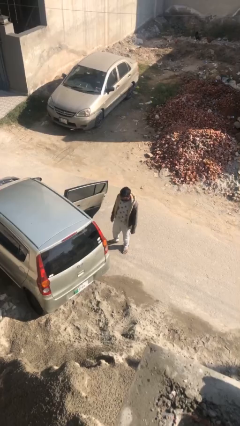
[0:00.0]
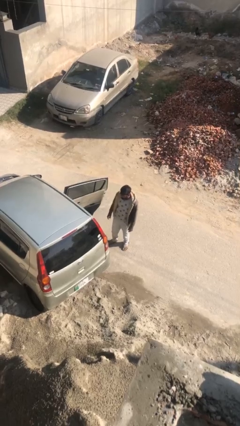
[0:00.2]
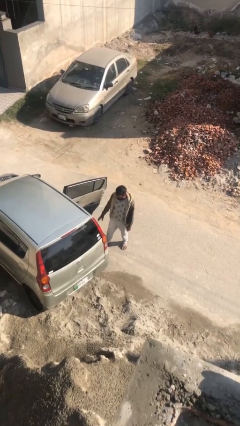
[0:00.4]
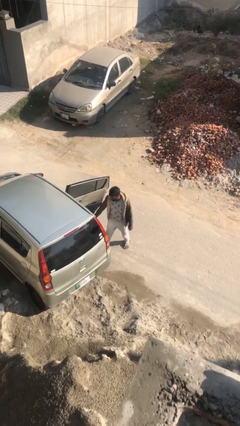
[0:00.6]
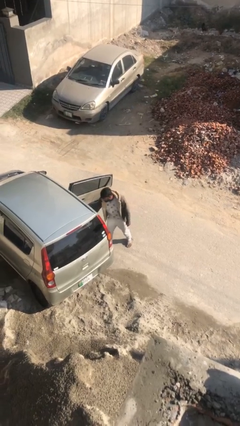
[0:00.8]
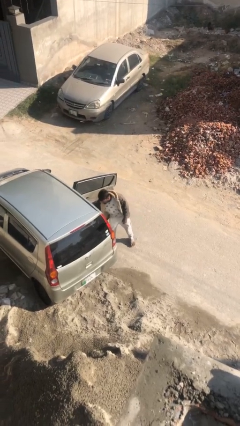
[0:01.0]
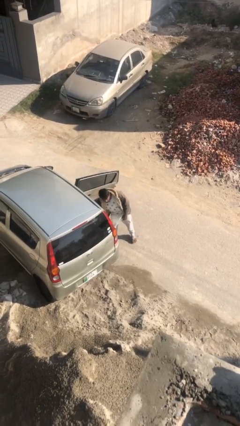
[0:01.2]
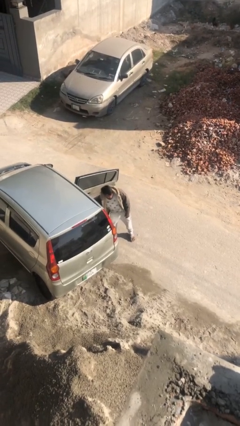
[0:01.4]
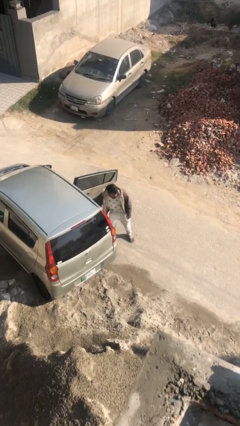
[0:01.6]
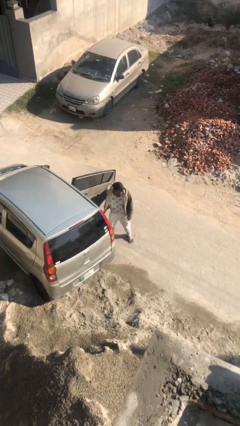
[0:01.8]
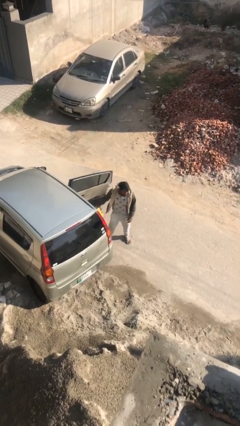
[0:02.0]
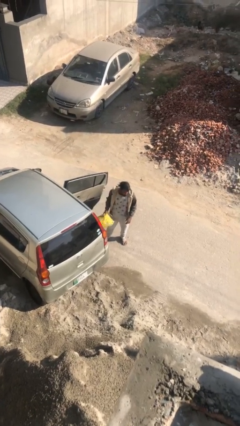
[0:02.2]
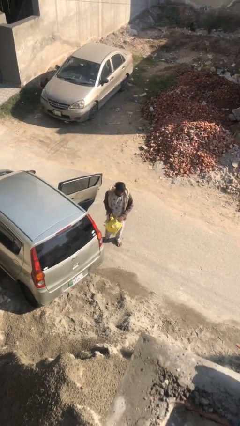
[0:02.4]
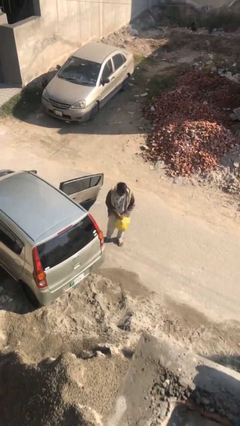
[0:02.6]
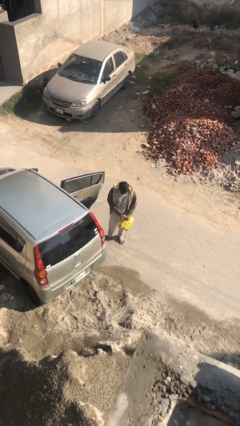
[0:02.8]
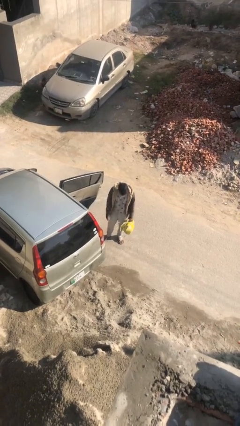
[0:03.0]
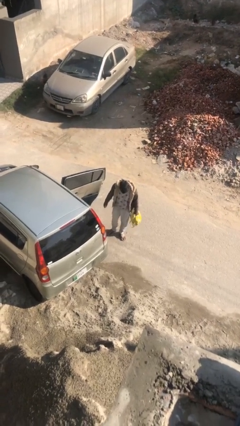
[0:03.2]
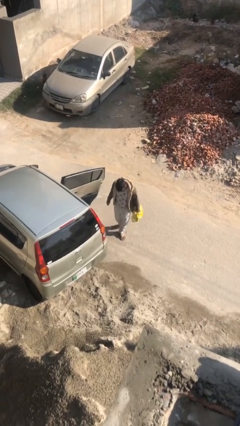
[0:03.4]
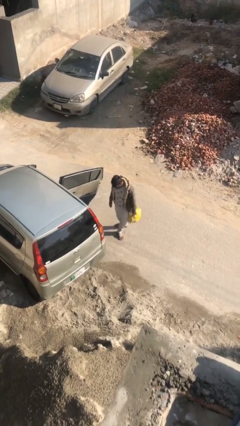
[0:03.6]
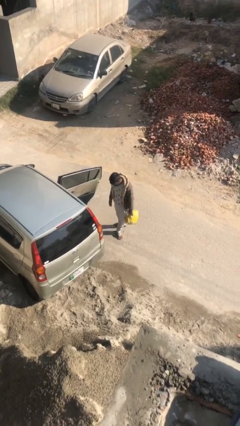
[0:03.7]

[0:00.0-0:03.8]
person unloads car

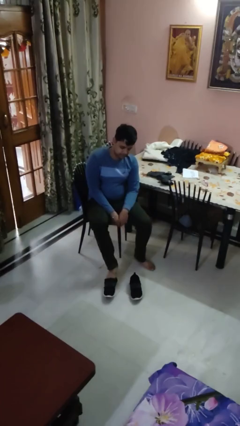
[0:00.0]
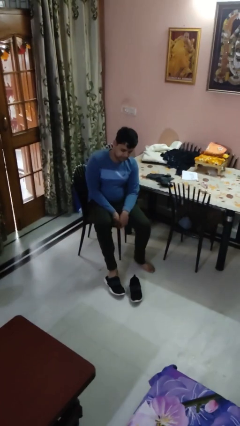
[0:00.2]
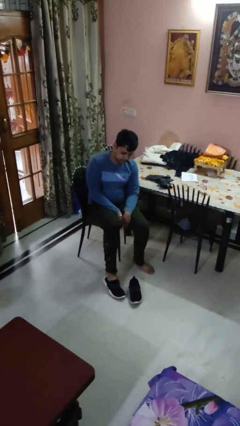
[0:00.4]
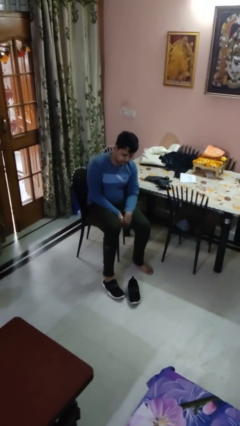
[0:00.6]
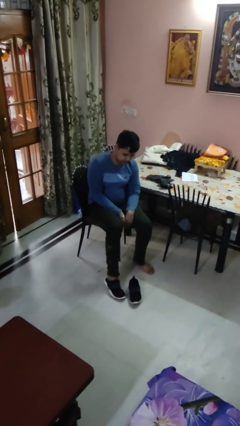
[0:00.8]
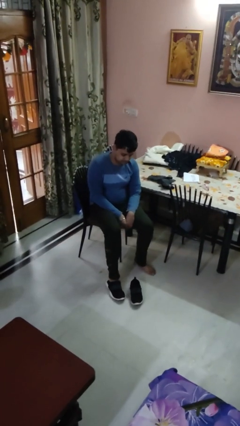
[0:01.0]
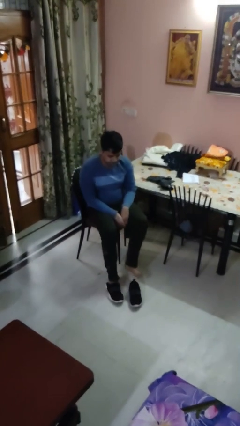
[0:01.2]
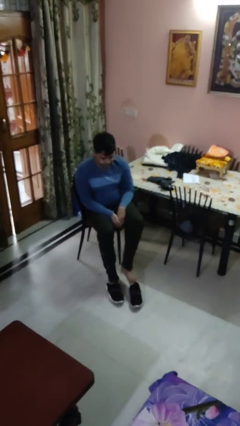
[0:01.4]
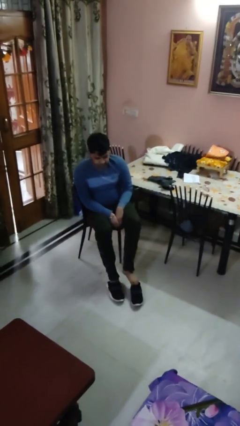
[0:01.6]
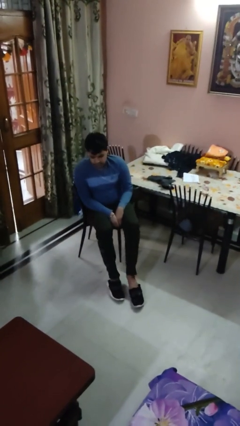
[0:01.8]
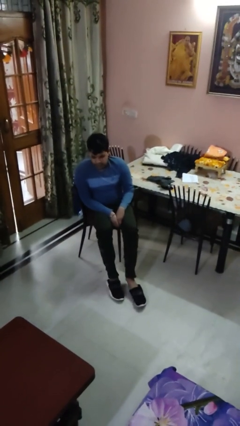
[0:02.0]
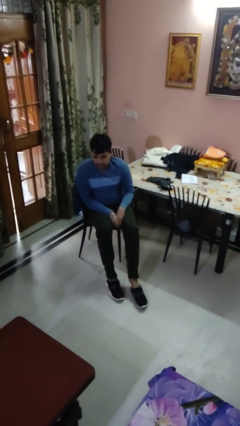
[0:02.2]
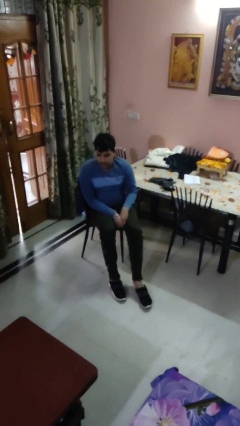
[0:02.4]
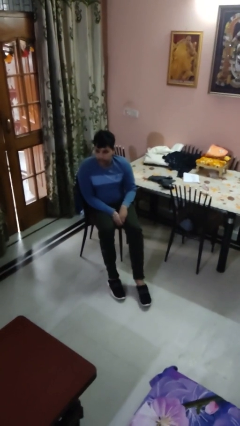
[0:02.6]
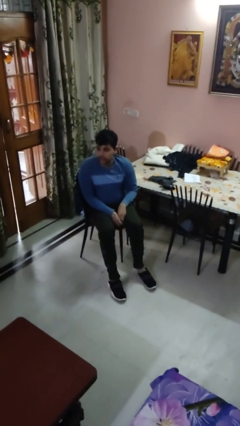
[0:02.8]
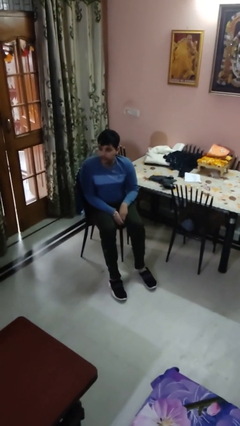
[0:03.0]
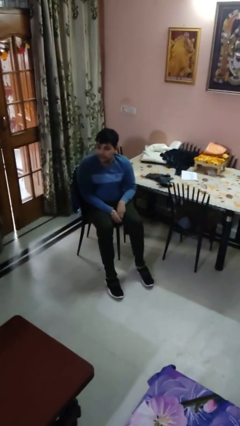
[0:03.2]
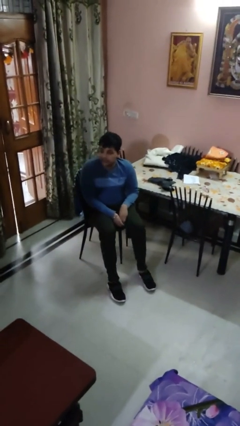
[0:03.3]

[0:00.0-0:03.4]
person puts on shoes

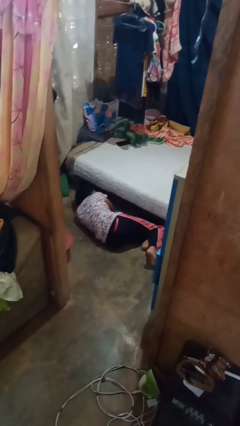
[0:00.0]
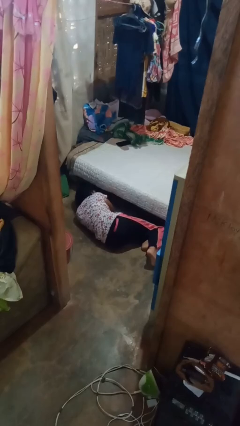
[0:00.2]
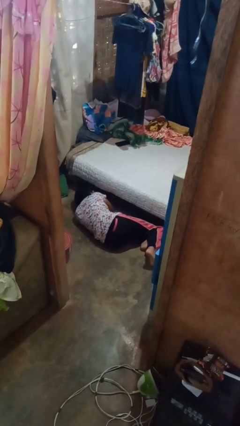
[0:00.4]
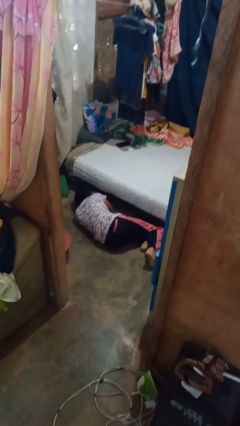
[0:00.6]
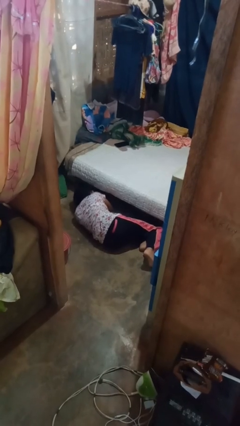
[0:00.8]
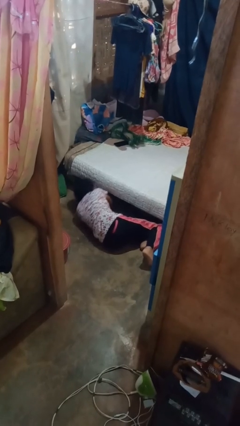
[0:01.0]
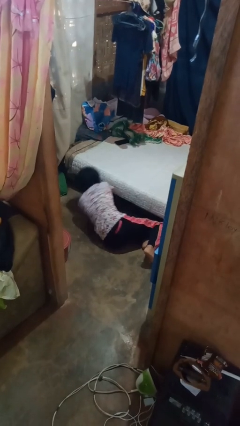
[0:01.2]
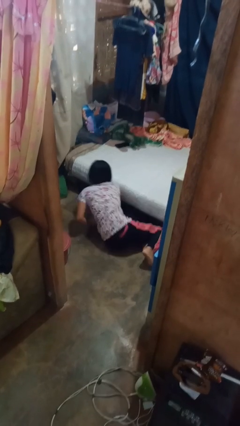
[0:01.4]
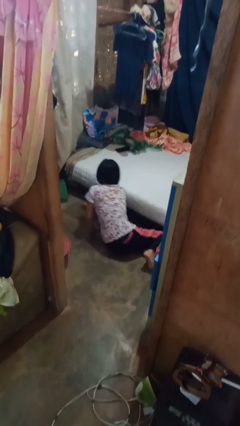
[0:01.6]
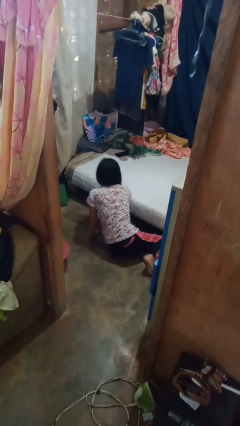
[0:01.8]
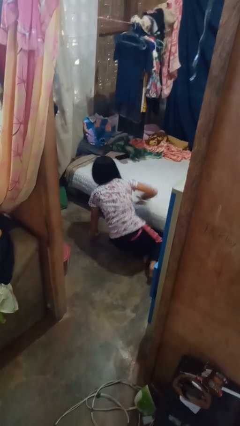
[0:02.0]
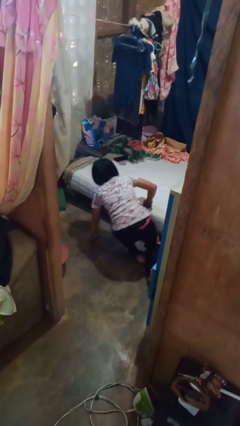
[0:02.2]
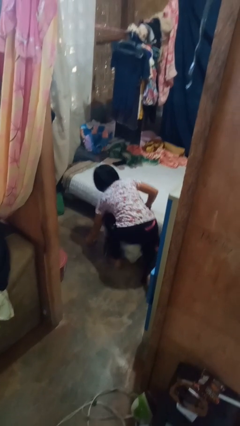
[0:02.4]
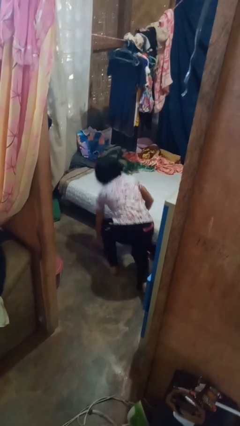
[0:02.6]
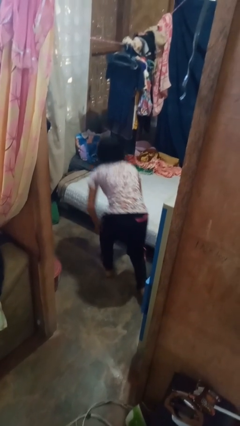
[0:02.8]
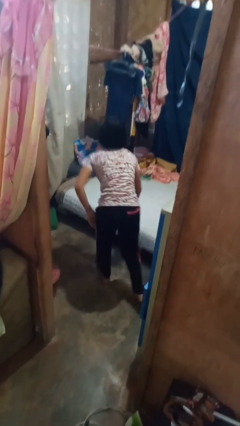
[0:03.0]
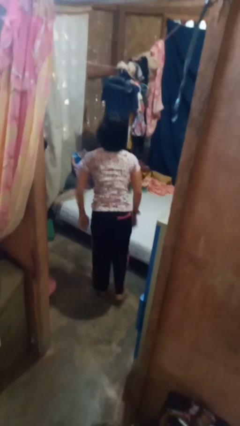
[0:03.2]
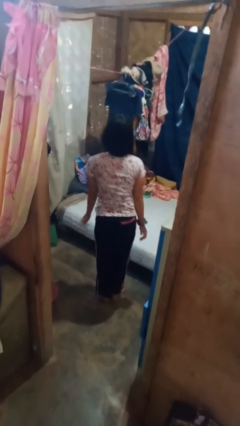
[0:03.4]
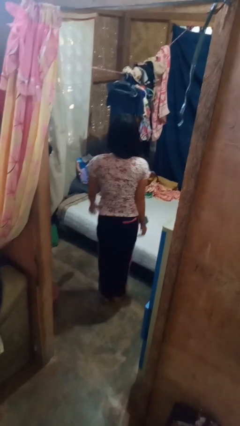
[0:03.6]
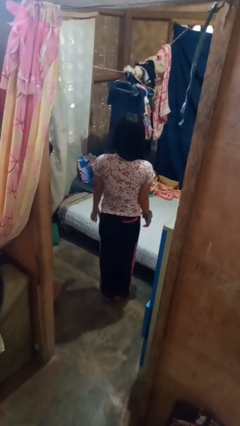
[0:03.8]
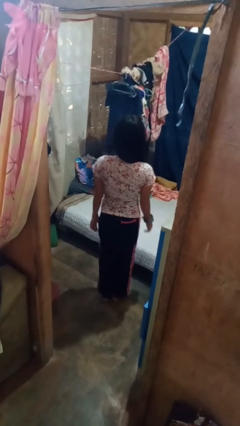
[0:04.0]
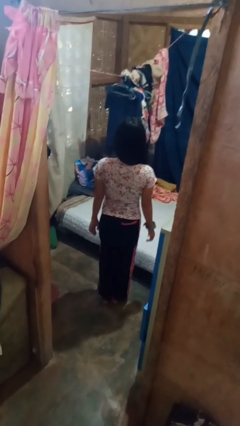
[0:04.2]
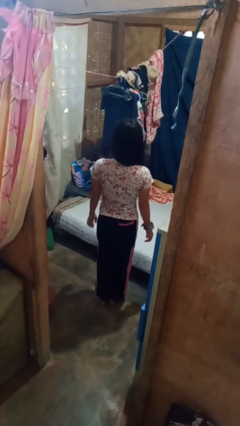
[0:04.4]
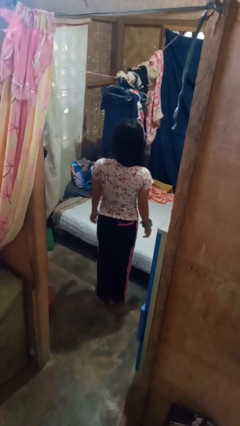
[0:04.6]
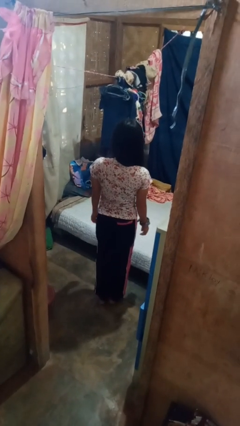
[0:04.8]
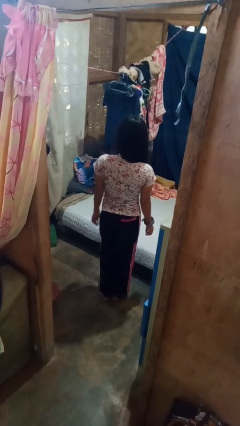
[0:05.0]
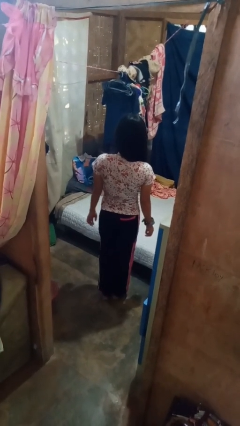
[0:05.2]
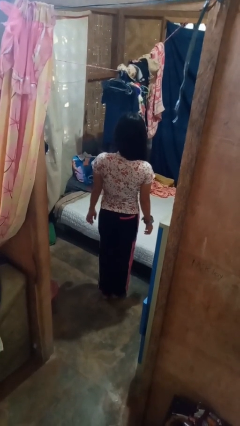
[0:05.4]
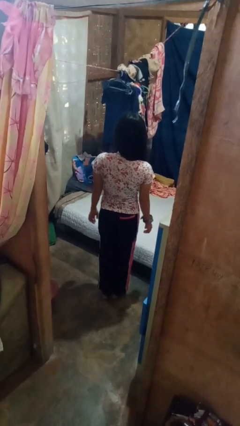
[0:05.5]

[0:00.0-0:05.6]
person stands up from floor

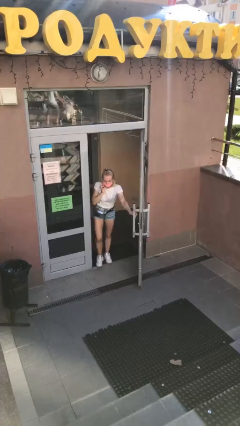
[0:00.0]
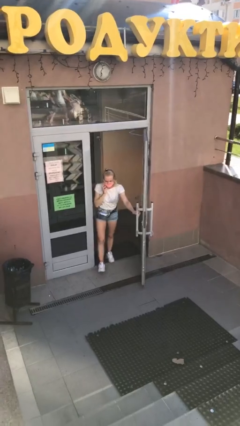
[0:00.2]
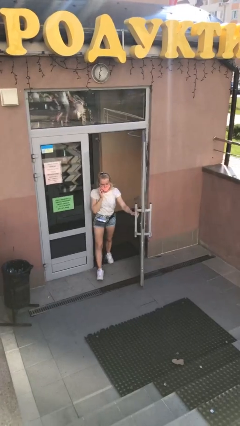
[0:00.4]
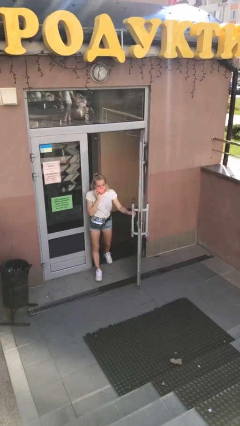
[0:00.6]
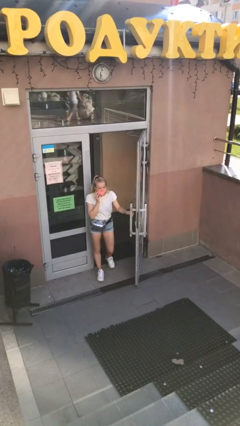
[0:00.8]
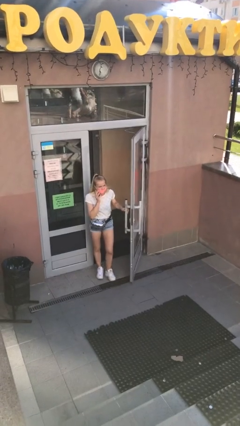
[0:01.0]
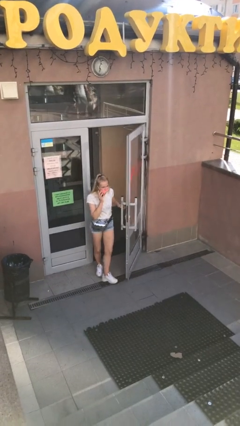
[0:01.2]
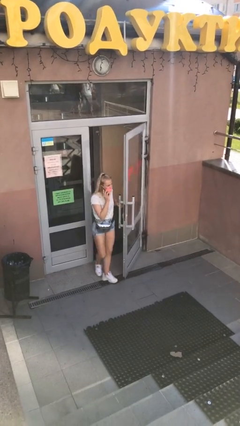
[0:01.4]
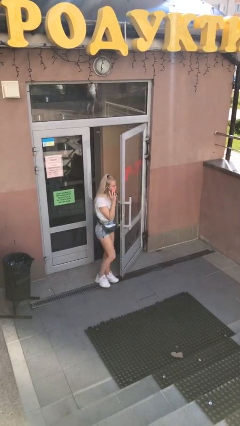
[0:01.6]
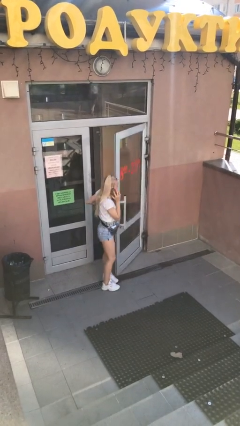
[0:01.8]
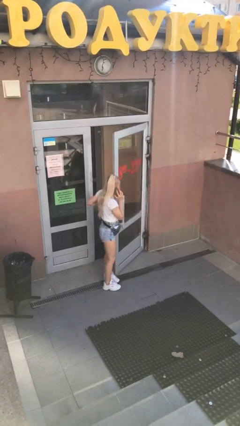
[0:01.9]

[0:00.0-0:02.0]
person enters scene through structure

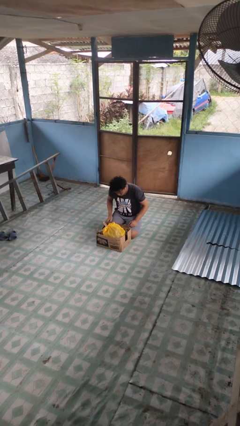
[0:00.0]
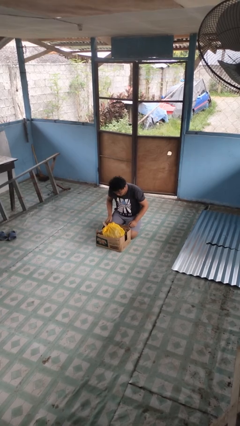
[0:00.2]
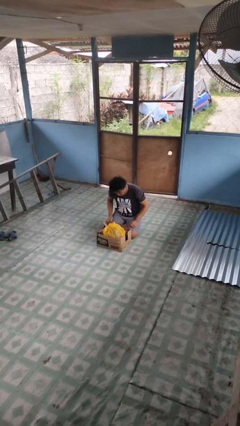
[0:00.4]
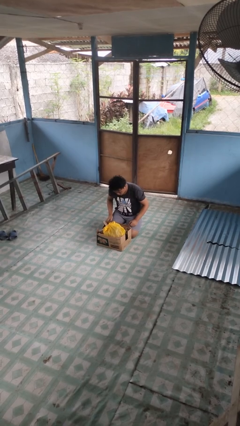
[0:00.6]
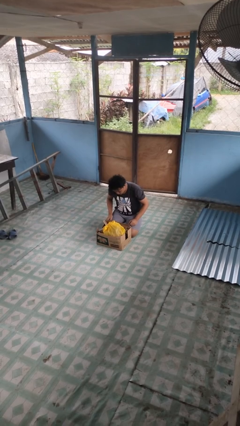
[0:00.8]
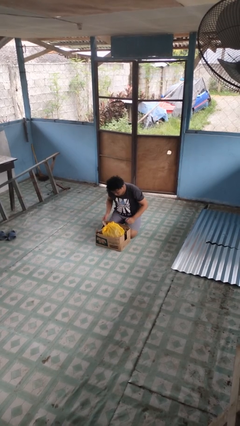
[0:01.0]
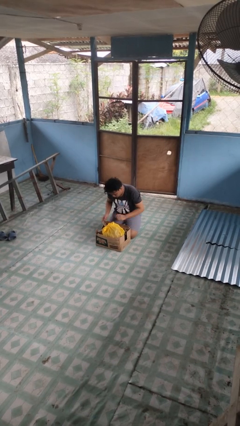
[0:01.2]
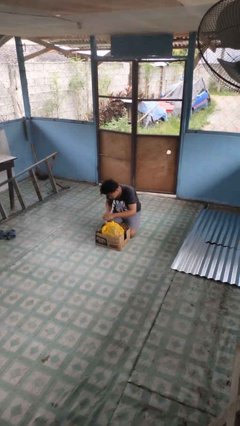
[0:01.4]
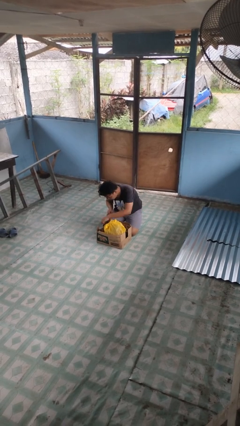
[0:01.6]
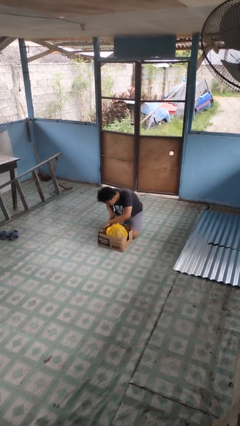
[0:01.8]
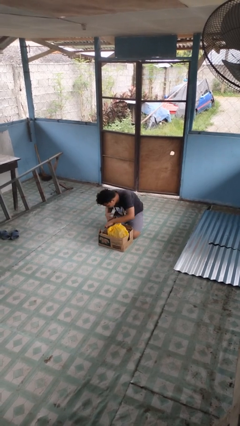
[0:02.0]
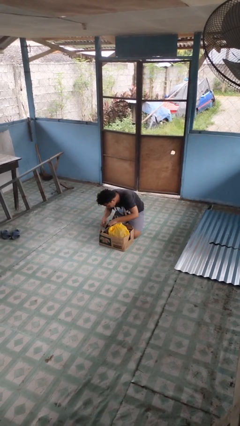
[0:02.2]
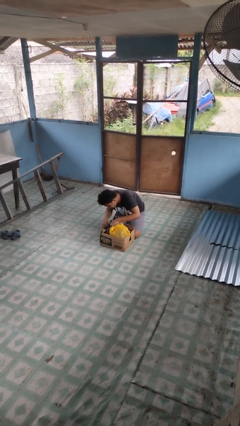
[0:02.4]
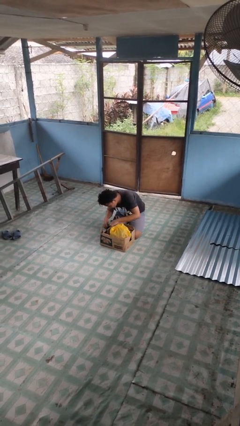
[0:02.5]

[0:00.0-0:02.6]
person searches in box

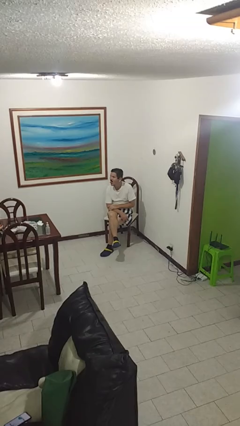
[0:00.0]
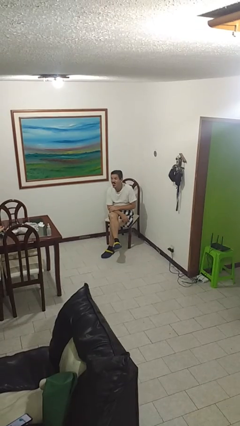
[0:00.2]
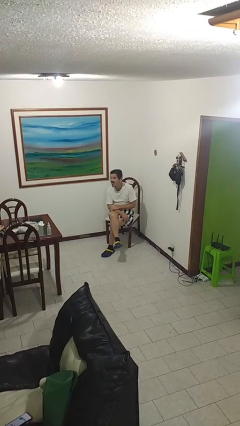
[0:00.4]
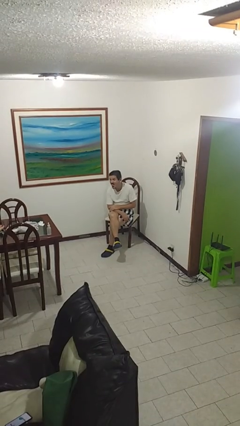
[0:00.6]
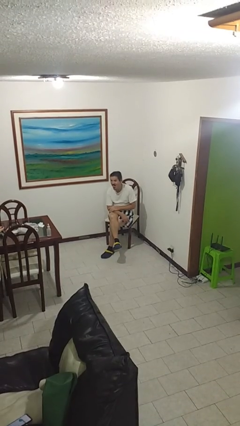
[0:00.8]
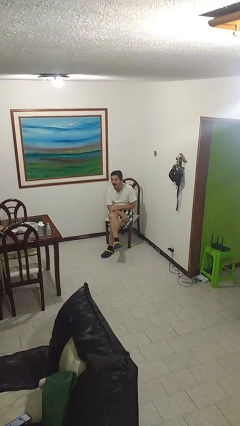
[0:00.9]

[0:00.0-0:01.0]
person sticks out tongue
